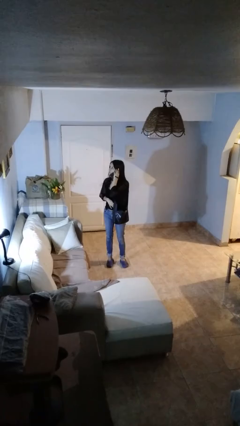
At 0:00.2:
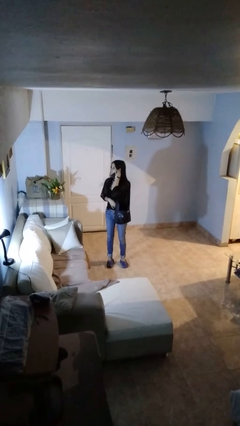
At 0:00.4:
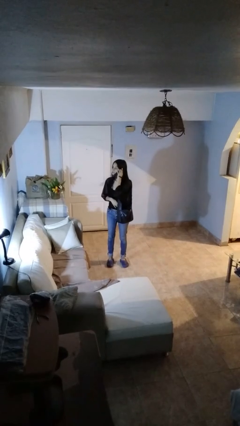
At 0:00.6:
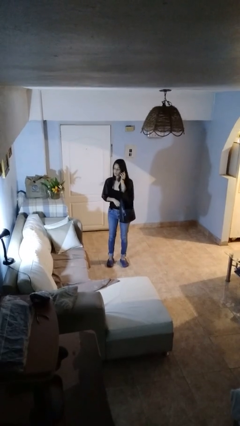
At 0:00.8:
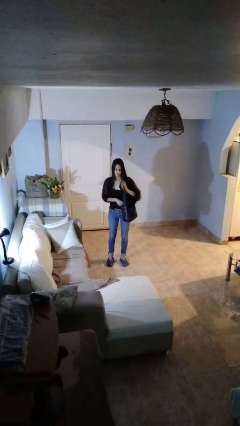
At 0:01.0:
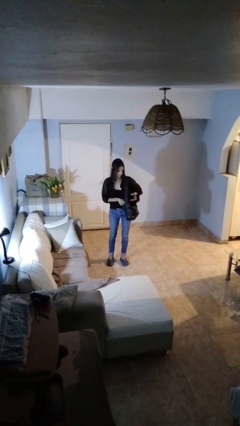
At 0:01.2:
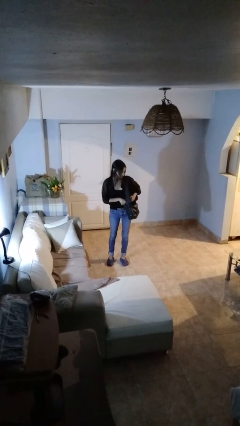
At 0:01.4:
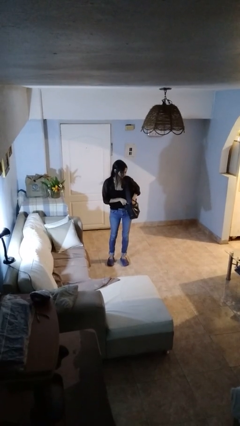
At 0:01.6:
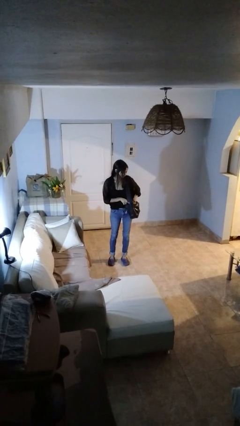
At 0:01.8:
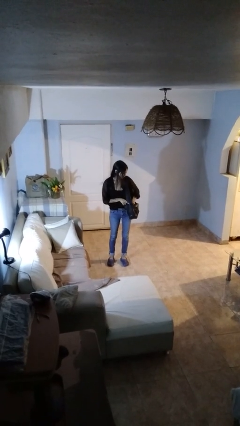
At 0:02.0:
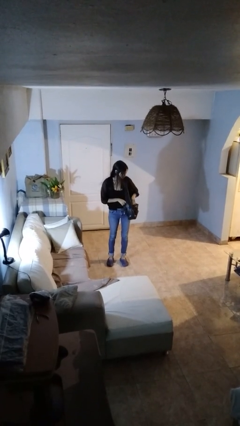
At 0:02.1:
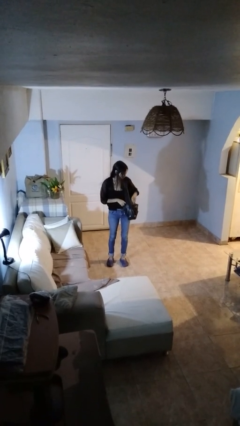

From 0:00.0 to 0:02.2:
person puts object into purse

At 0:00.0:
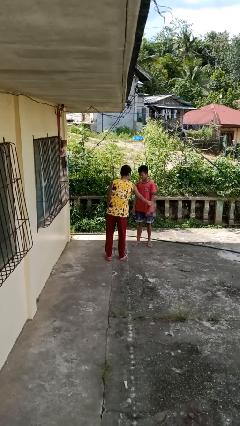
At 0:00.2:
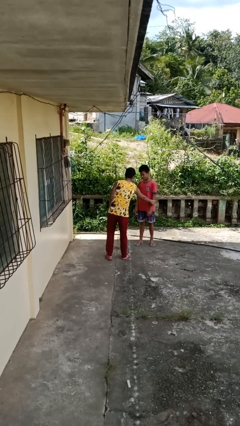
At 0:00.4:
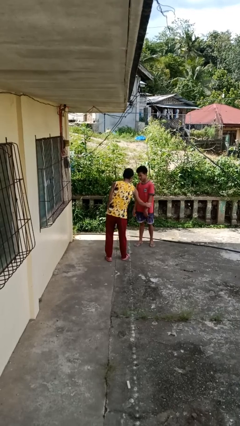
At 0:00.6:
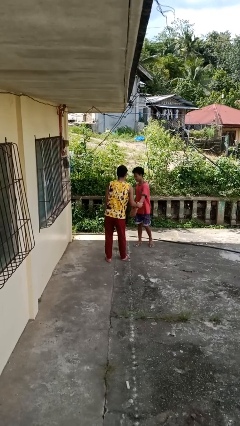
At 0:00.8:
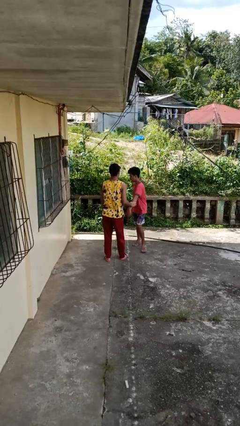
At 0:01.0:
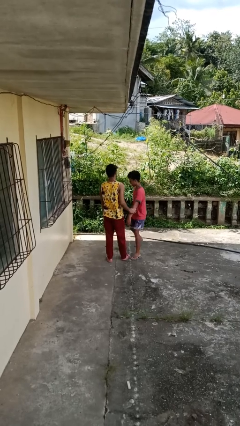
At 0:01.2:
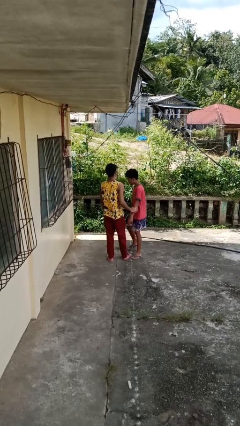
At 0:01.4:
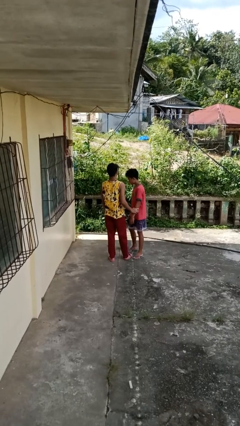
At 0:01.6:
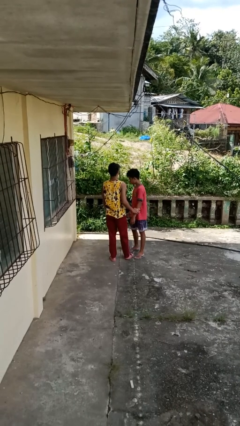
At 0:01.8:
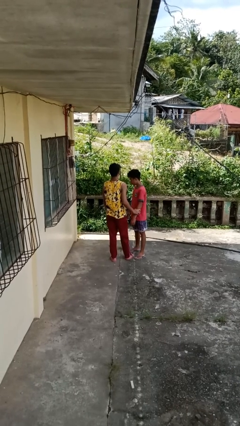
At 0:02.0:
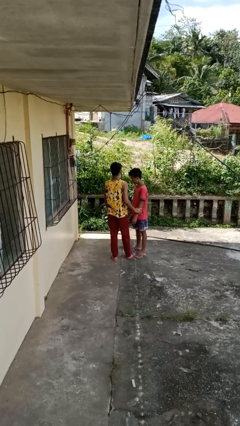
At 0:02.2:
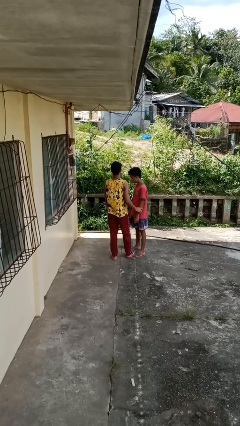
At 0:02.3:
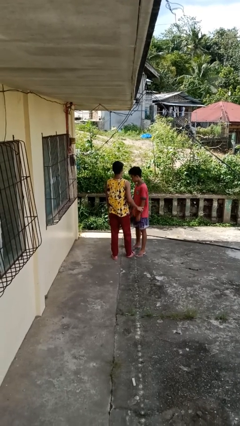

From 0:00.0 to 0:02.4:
person grabs person by forearm

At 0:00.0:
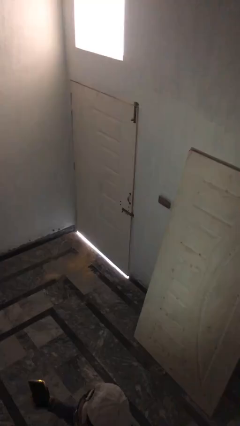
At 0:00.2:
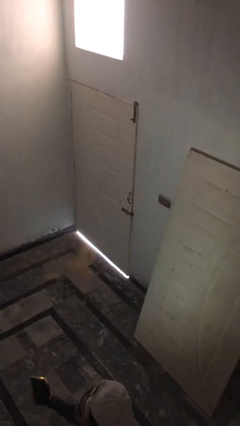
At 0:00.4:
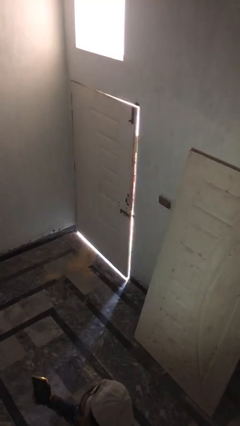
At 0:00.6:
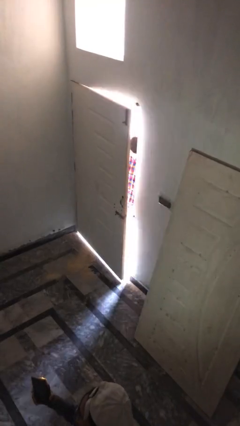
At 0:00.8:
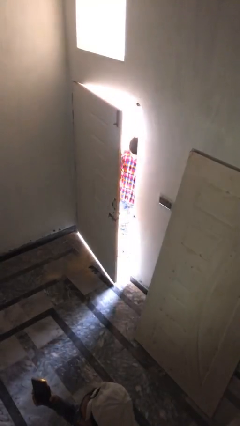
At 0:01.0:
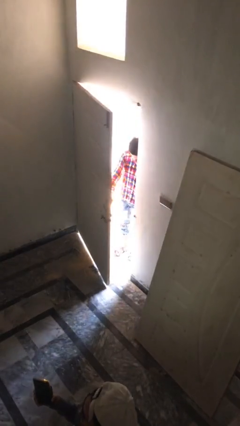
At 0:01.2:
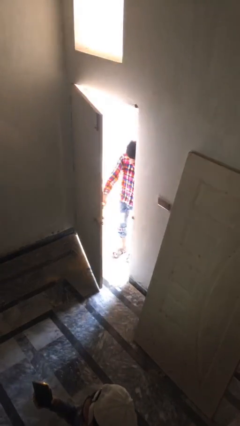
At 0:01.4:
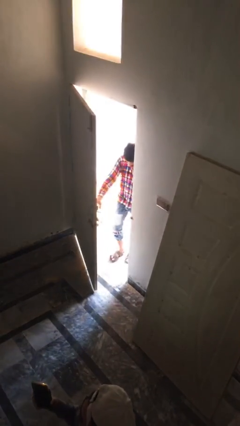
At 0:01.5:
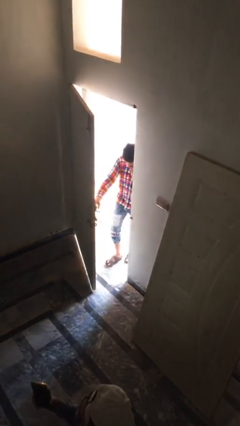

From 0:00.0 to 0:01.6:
person opens facility door

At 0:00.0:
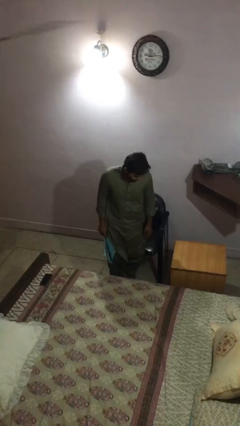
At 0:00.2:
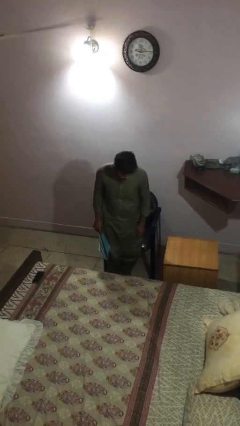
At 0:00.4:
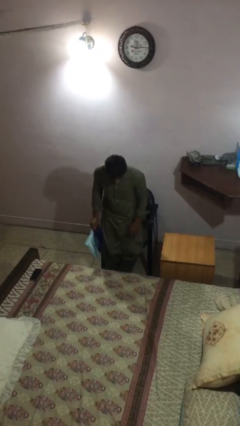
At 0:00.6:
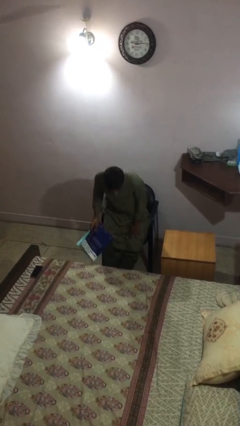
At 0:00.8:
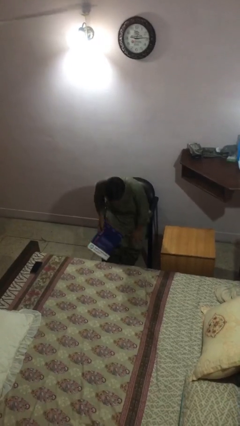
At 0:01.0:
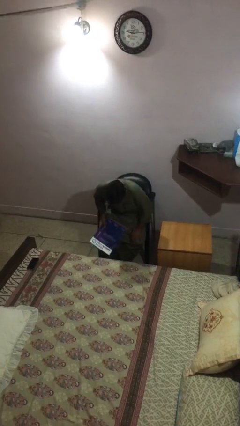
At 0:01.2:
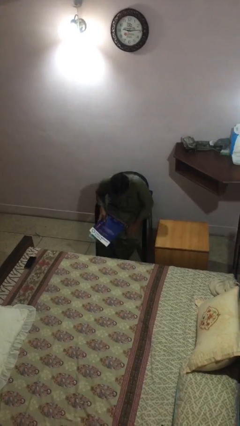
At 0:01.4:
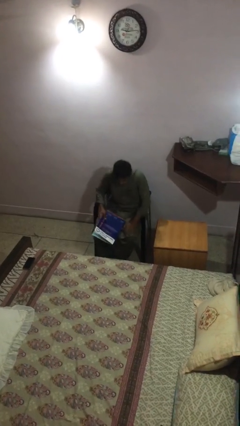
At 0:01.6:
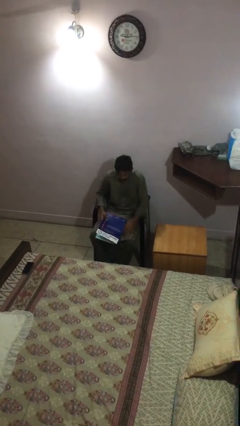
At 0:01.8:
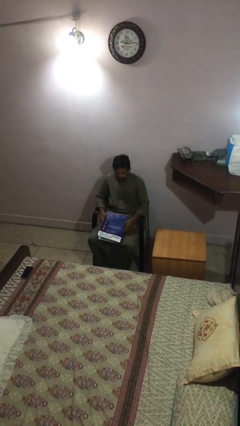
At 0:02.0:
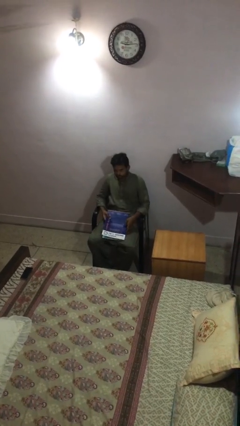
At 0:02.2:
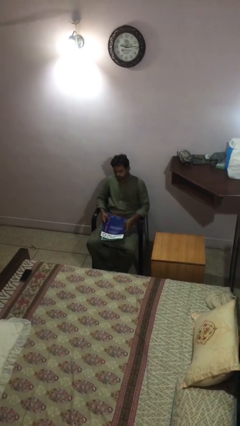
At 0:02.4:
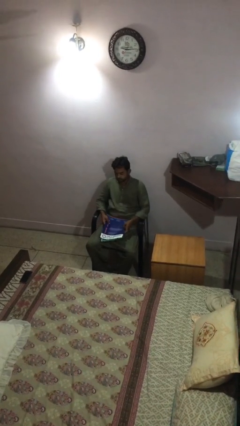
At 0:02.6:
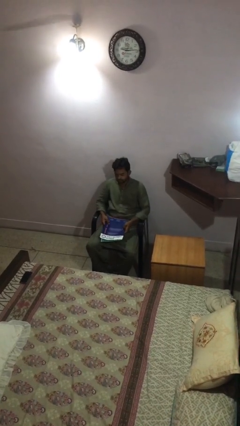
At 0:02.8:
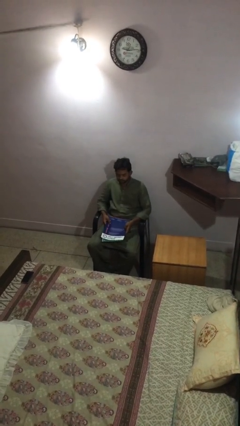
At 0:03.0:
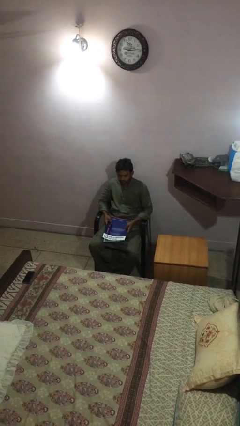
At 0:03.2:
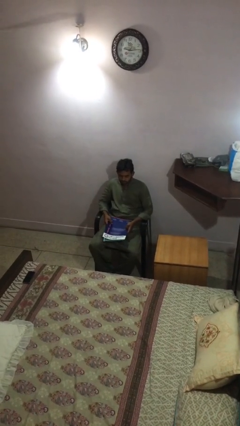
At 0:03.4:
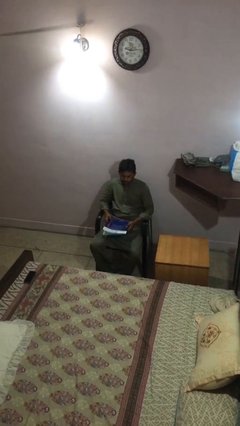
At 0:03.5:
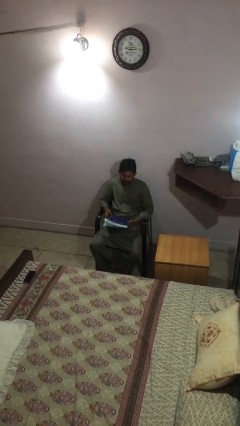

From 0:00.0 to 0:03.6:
person sits down

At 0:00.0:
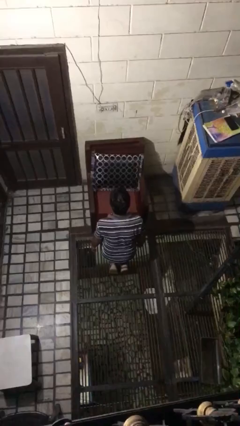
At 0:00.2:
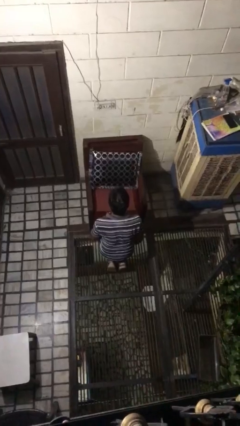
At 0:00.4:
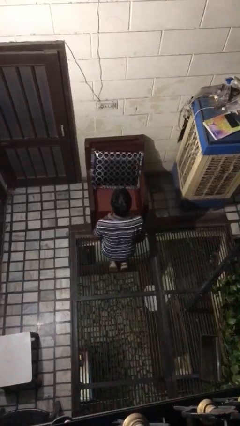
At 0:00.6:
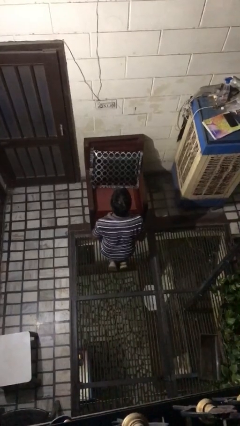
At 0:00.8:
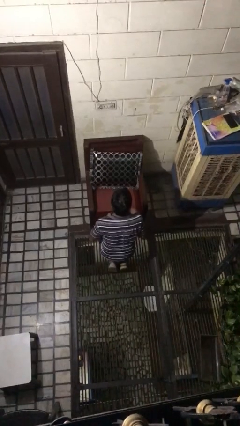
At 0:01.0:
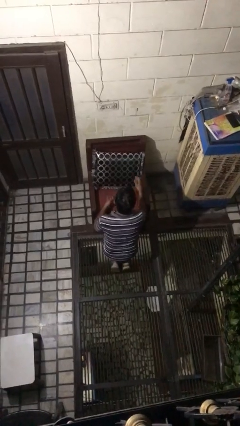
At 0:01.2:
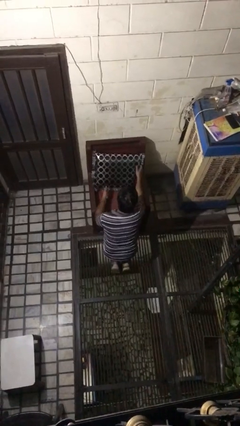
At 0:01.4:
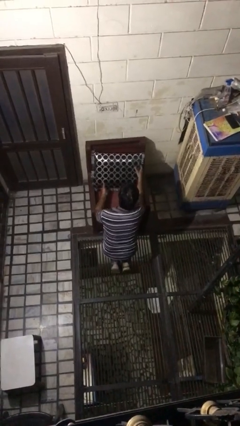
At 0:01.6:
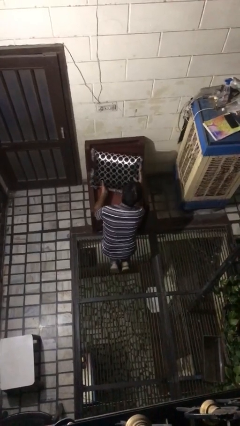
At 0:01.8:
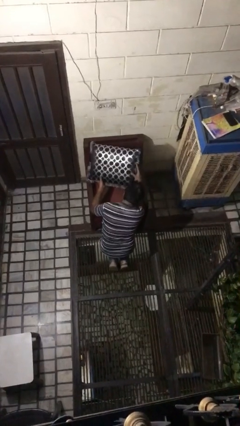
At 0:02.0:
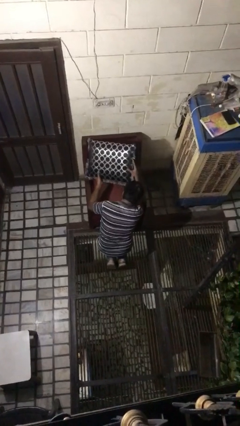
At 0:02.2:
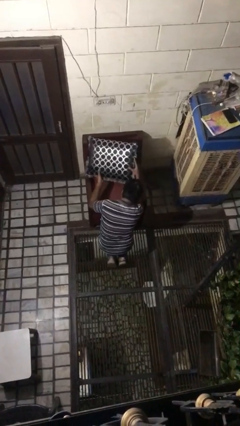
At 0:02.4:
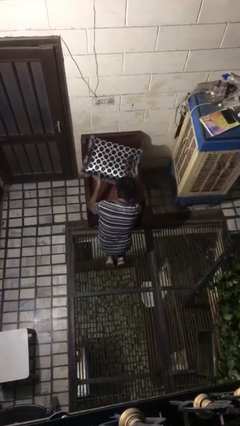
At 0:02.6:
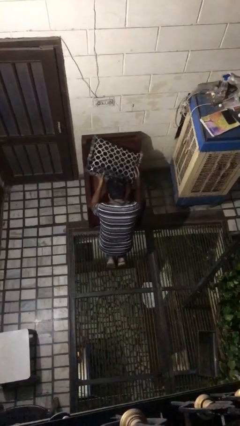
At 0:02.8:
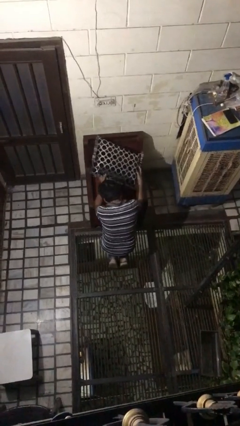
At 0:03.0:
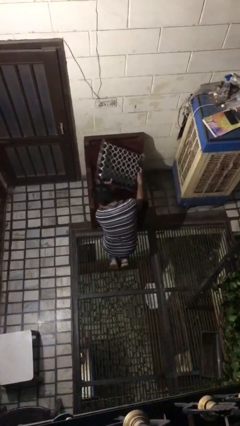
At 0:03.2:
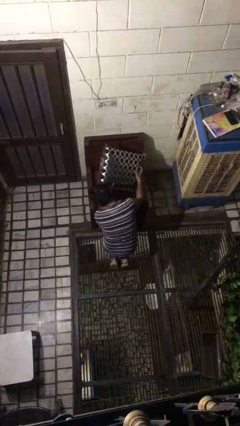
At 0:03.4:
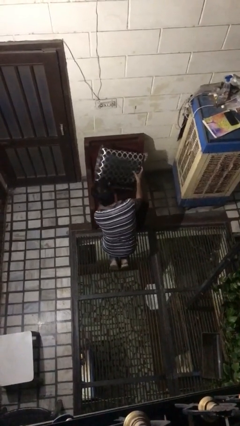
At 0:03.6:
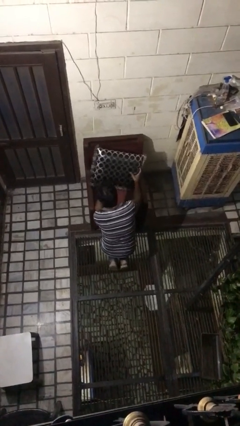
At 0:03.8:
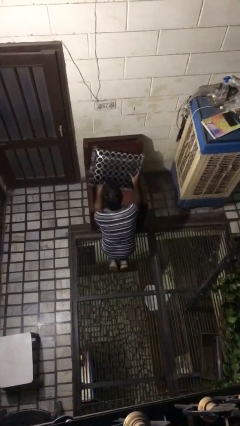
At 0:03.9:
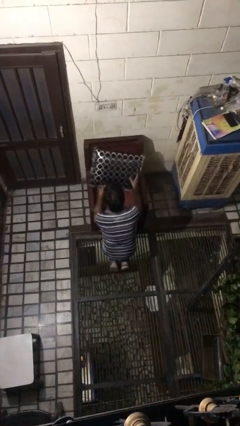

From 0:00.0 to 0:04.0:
person searches in couch

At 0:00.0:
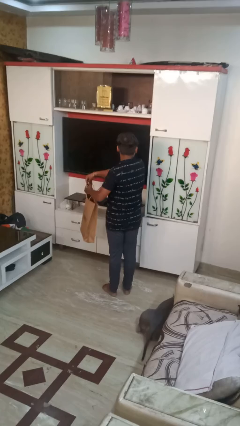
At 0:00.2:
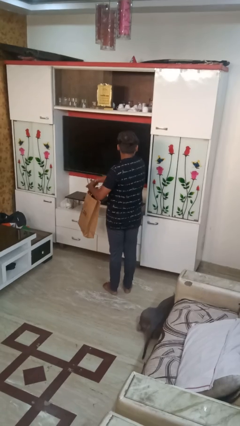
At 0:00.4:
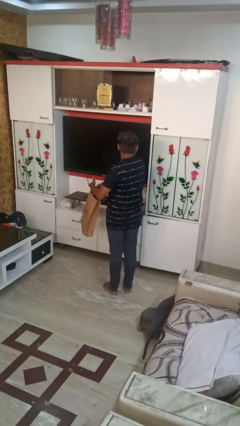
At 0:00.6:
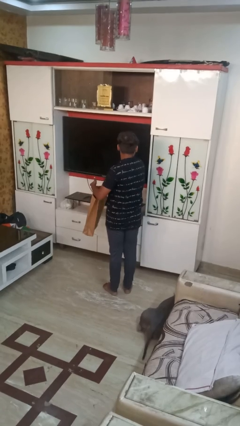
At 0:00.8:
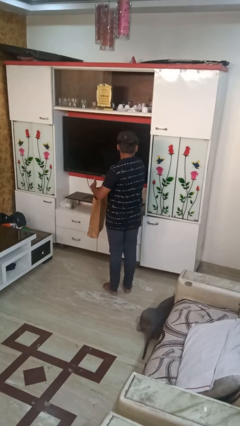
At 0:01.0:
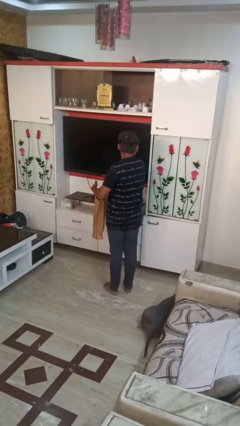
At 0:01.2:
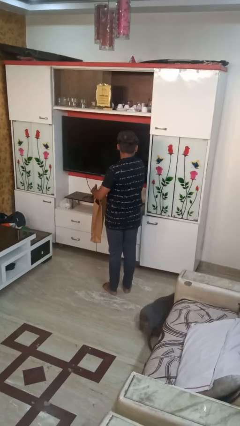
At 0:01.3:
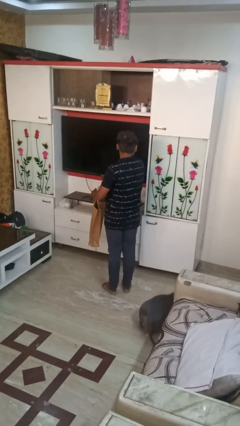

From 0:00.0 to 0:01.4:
person puts object into bag

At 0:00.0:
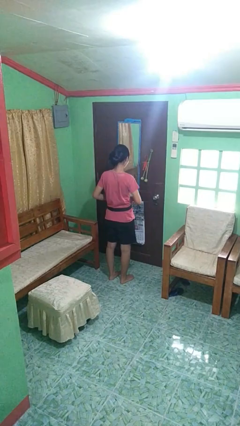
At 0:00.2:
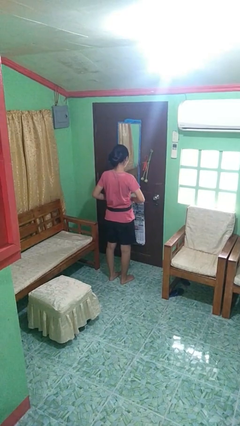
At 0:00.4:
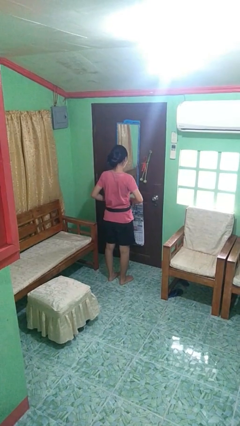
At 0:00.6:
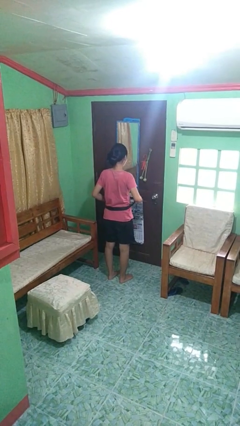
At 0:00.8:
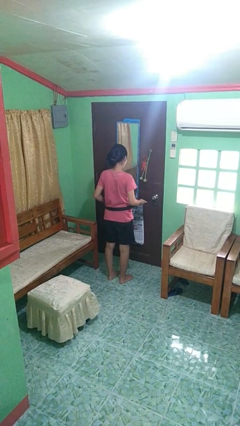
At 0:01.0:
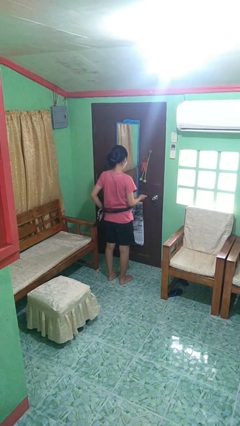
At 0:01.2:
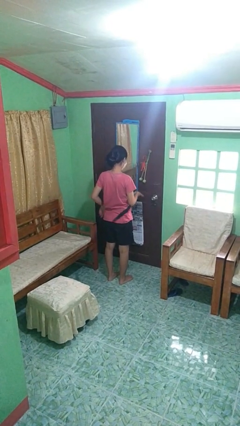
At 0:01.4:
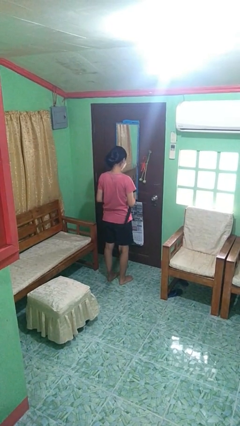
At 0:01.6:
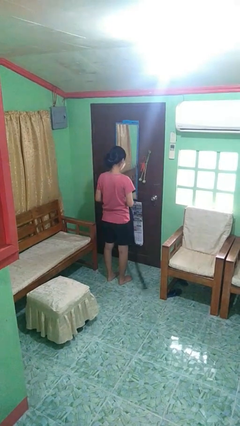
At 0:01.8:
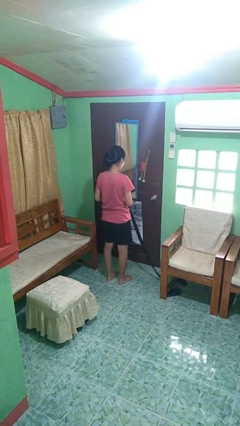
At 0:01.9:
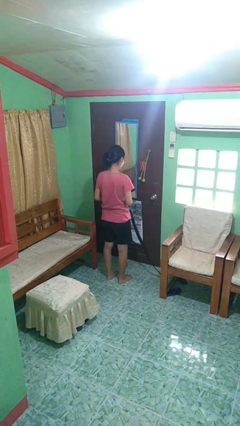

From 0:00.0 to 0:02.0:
person takes off belt
